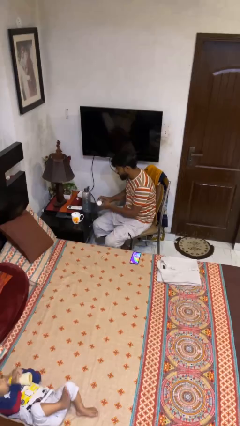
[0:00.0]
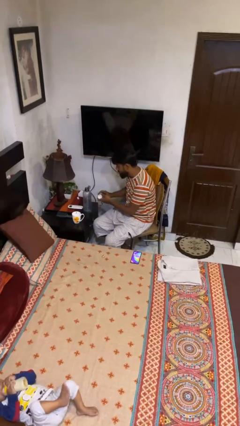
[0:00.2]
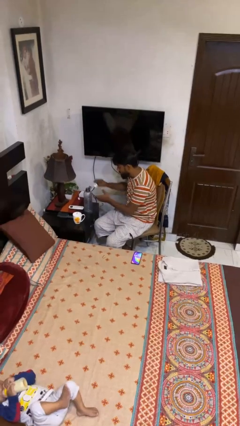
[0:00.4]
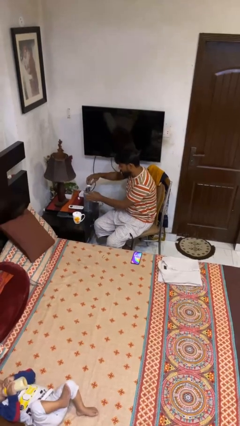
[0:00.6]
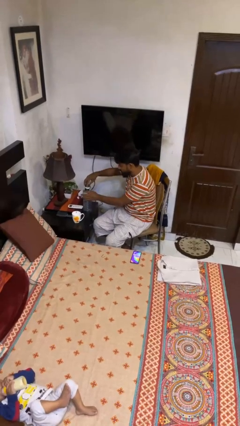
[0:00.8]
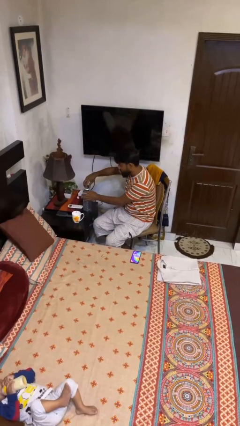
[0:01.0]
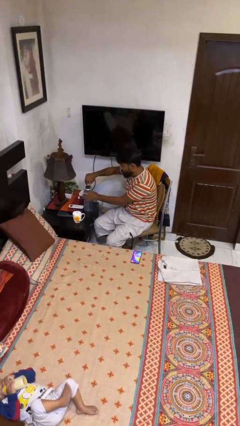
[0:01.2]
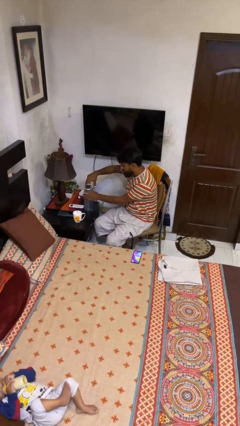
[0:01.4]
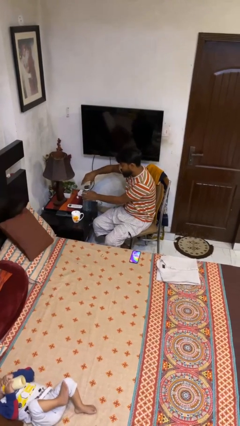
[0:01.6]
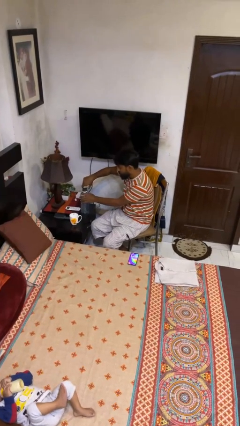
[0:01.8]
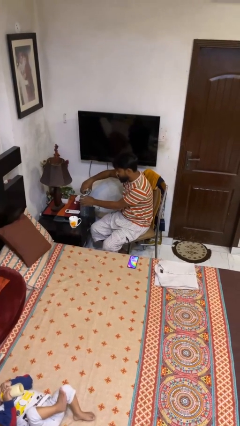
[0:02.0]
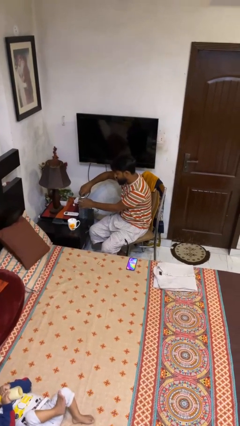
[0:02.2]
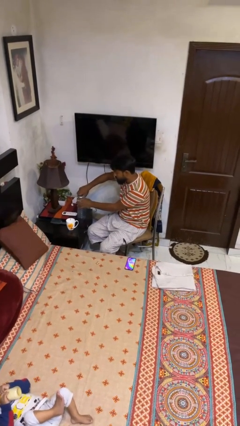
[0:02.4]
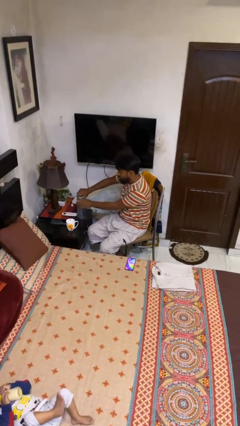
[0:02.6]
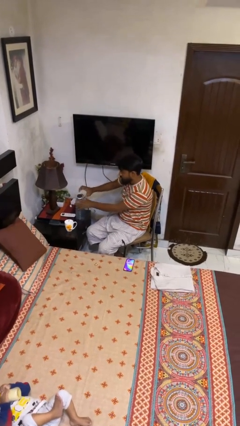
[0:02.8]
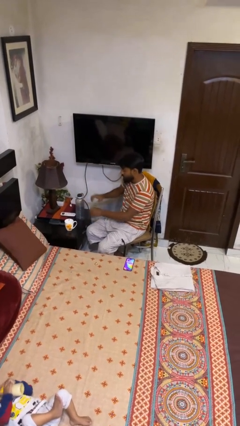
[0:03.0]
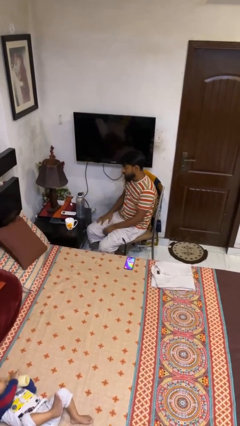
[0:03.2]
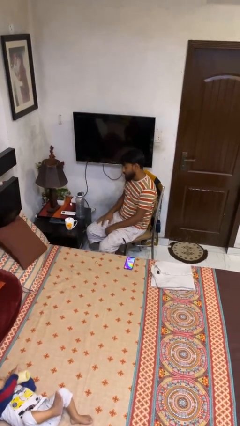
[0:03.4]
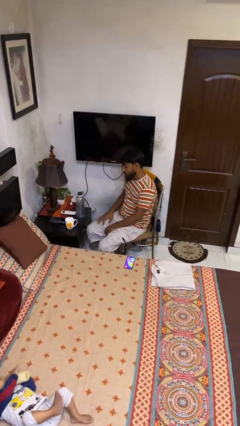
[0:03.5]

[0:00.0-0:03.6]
person screws lid to bottle

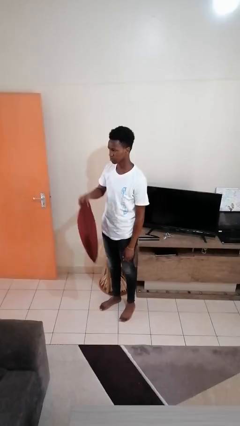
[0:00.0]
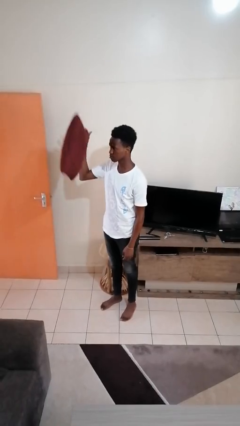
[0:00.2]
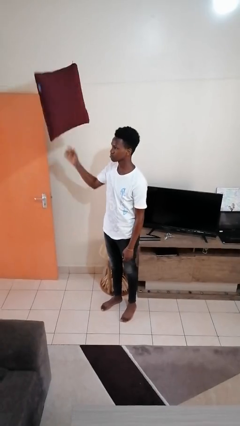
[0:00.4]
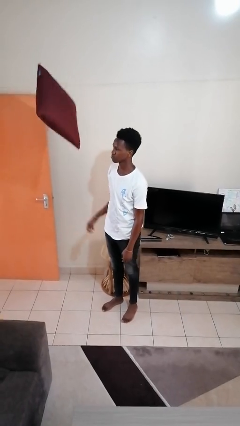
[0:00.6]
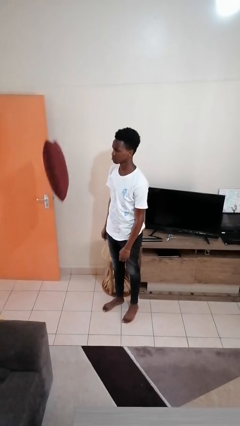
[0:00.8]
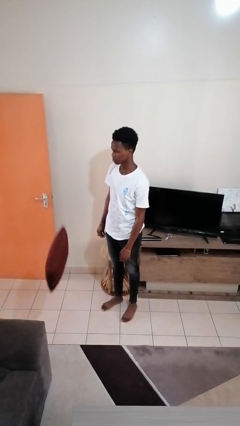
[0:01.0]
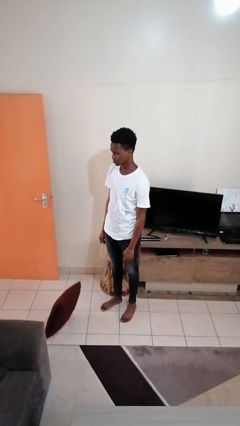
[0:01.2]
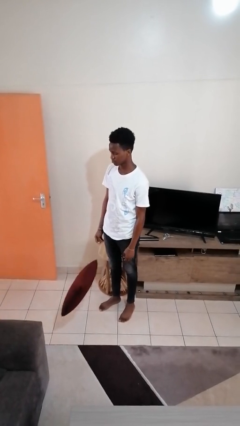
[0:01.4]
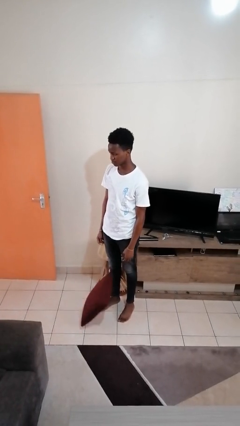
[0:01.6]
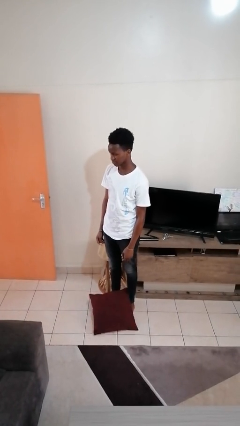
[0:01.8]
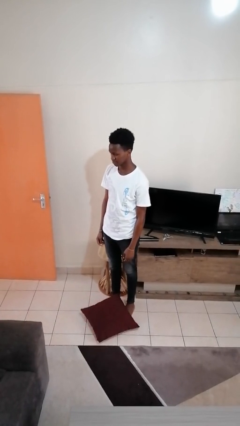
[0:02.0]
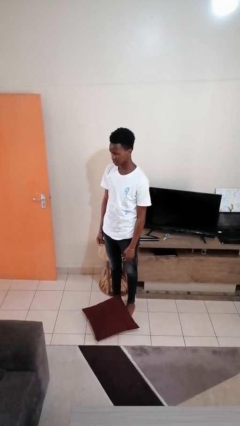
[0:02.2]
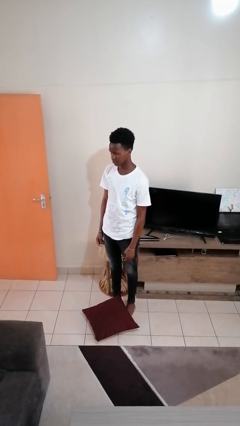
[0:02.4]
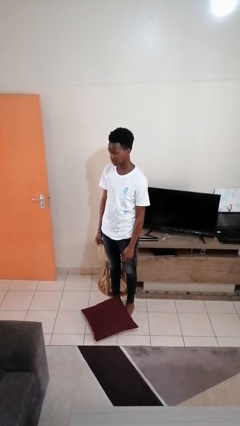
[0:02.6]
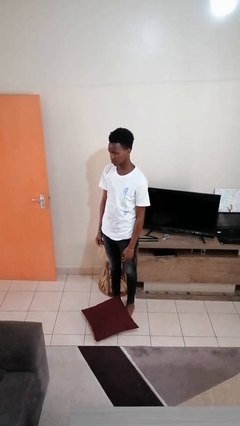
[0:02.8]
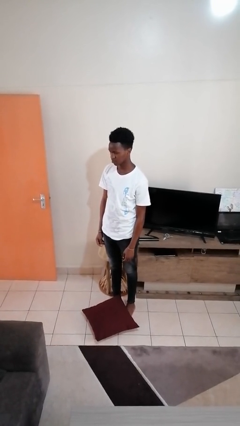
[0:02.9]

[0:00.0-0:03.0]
person throws object into air

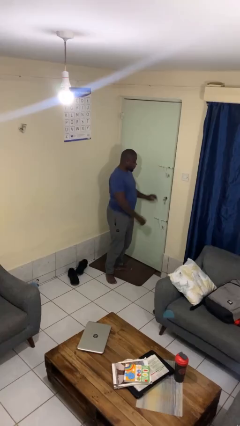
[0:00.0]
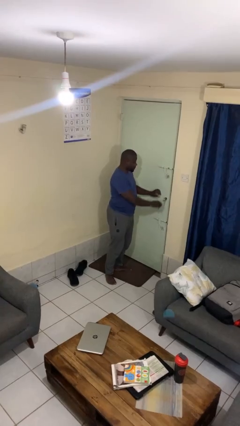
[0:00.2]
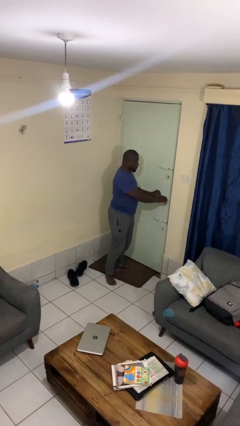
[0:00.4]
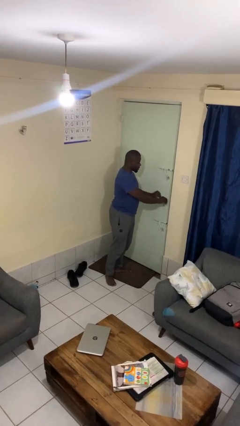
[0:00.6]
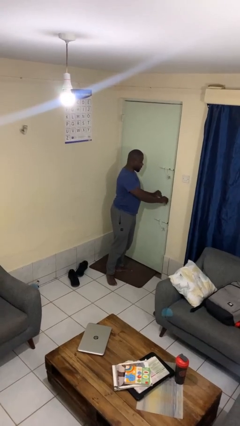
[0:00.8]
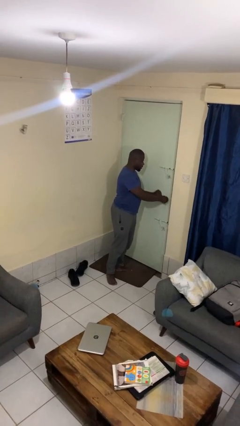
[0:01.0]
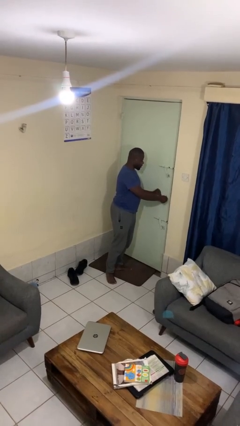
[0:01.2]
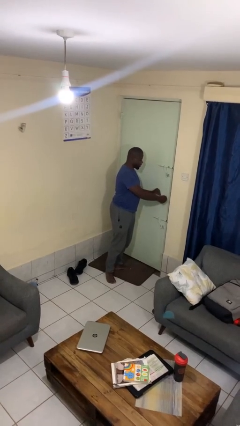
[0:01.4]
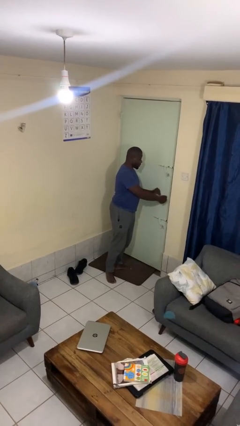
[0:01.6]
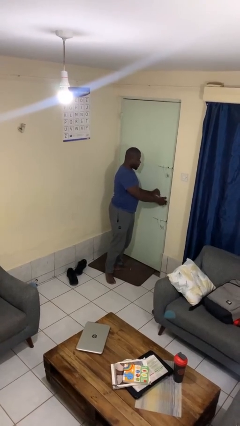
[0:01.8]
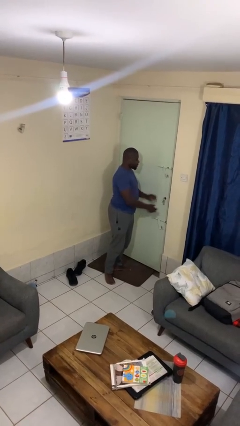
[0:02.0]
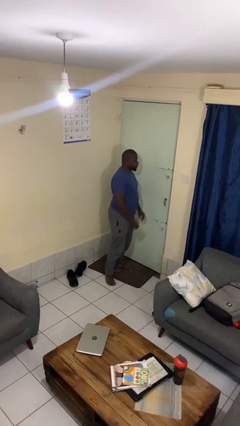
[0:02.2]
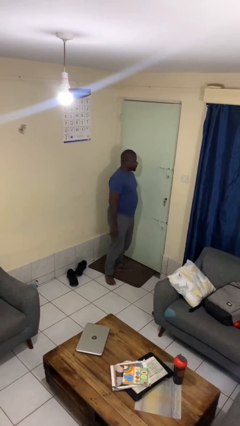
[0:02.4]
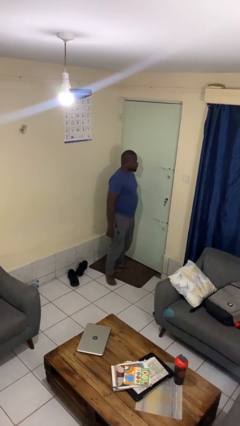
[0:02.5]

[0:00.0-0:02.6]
person locks door with keys

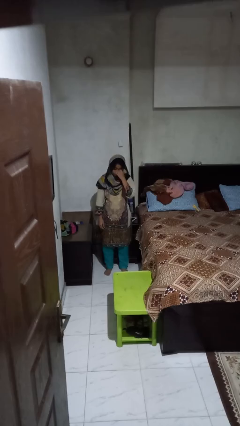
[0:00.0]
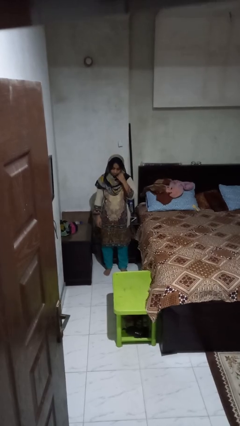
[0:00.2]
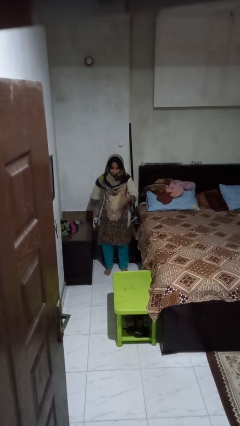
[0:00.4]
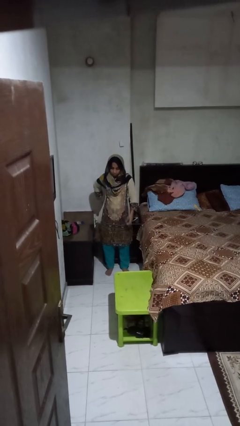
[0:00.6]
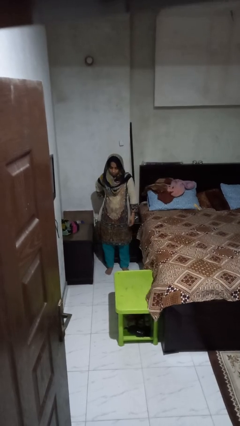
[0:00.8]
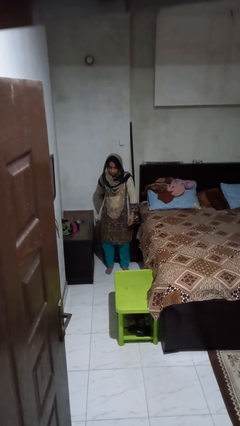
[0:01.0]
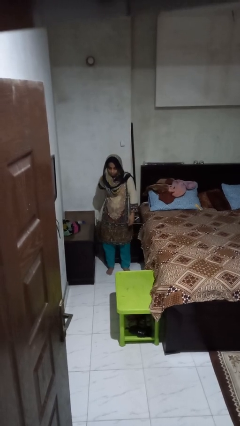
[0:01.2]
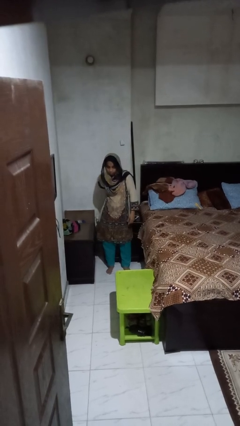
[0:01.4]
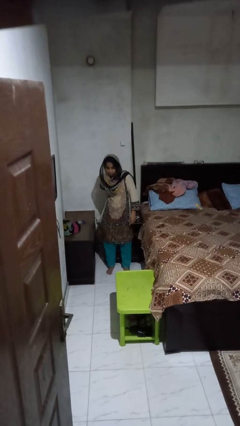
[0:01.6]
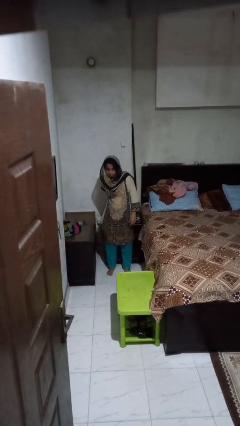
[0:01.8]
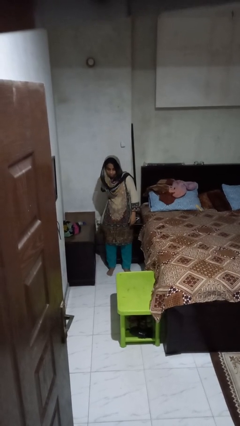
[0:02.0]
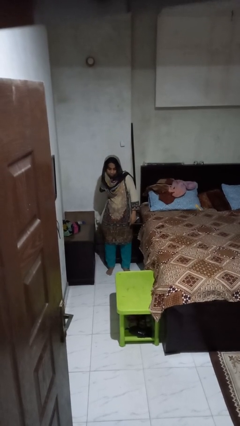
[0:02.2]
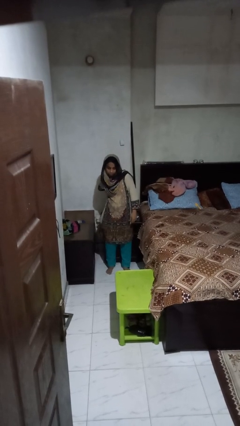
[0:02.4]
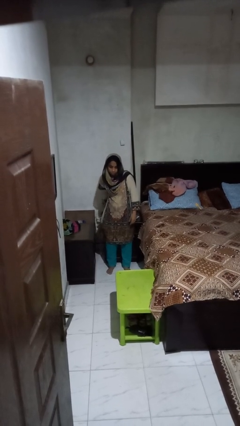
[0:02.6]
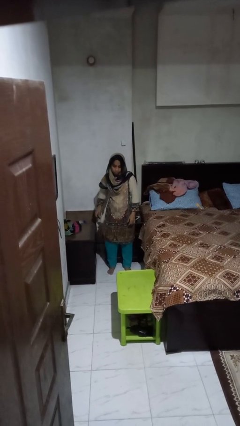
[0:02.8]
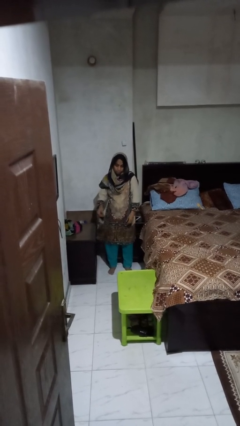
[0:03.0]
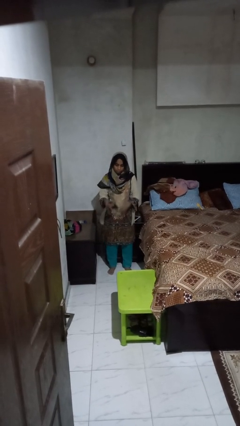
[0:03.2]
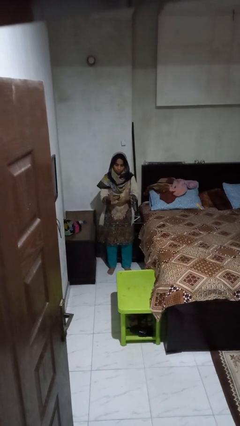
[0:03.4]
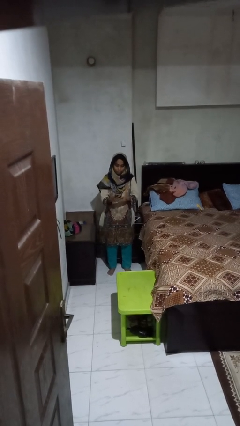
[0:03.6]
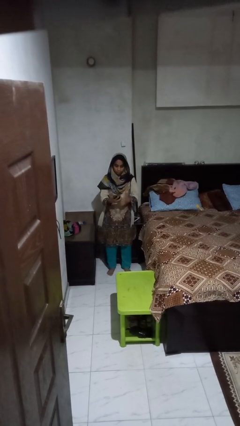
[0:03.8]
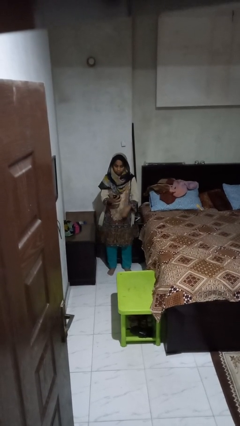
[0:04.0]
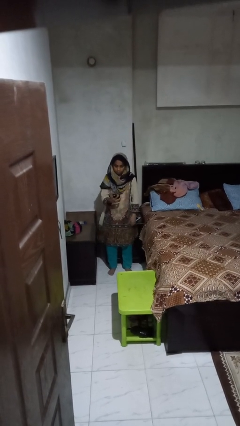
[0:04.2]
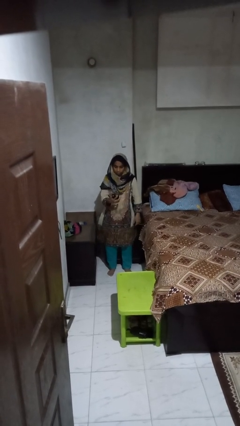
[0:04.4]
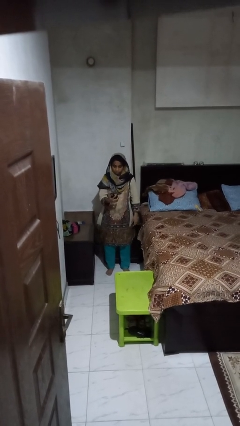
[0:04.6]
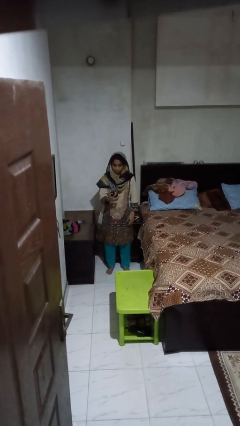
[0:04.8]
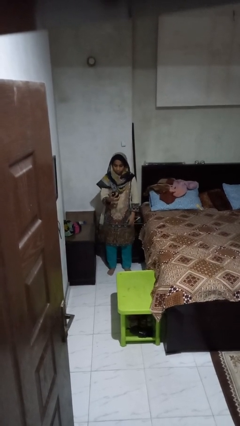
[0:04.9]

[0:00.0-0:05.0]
person takes phone from pocket

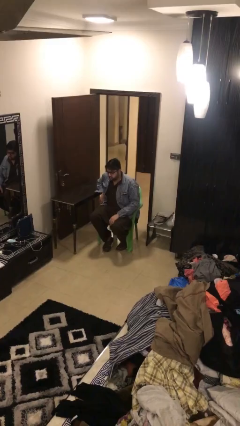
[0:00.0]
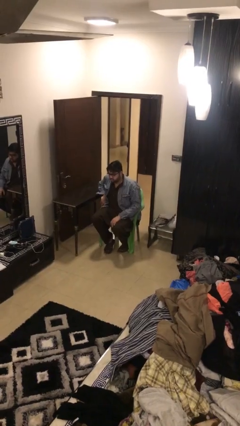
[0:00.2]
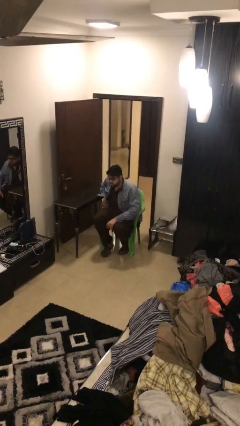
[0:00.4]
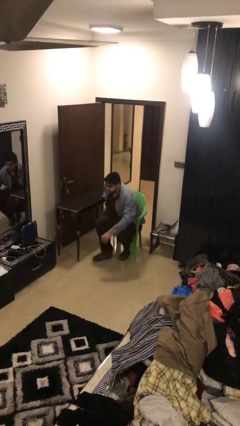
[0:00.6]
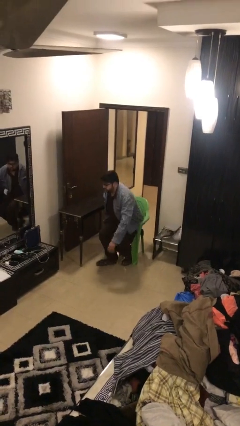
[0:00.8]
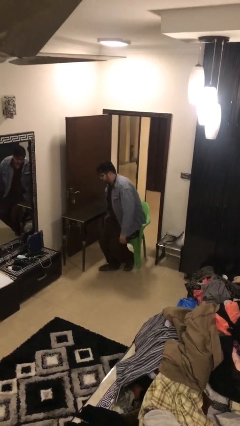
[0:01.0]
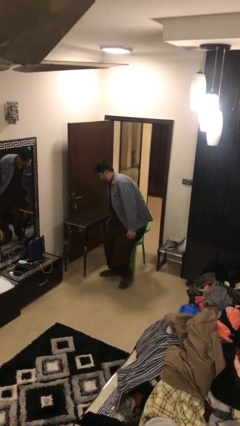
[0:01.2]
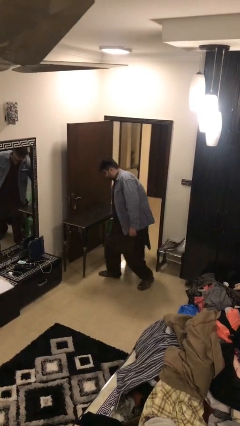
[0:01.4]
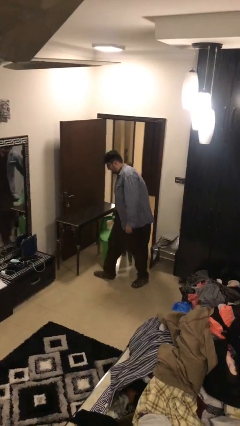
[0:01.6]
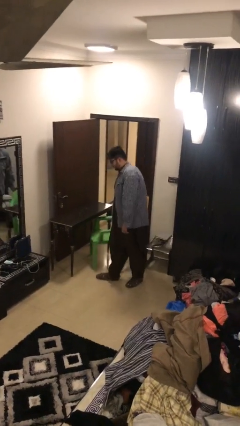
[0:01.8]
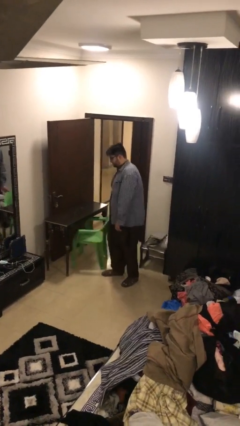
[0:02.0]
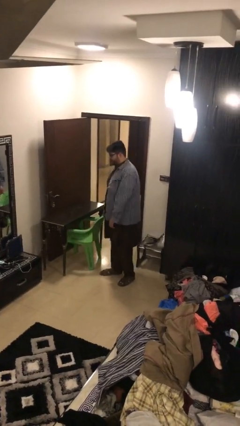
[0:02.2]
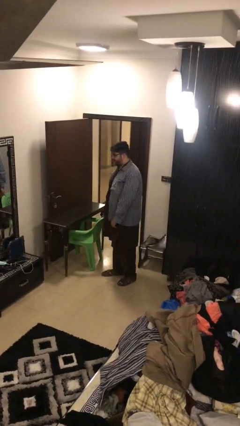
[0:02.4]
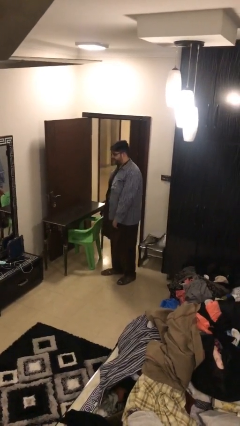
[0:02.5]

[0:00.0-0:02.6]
person stands up
